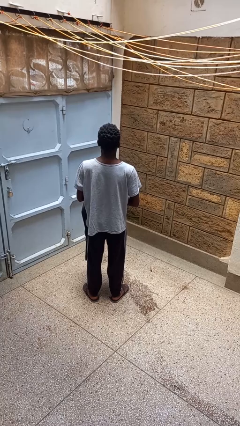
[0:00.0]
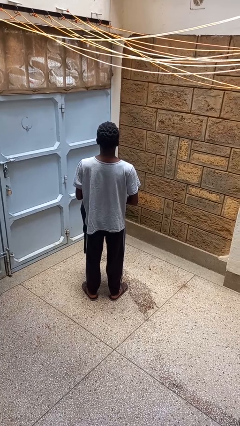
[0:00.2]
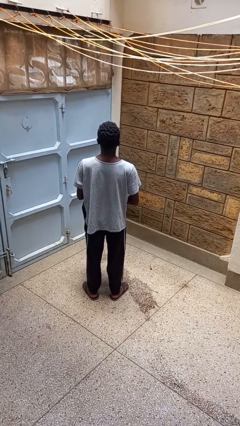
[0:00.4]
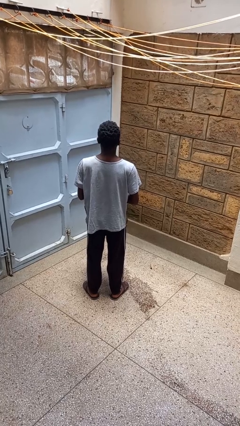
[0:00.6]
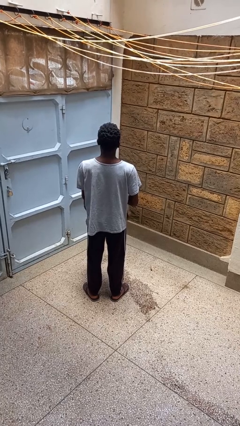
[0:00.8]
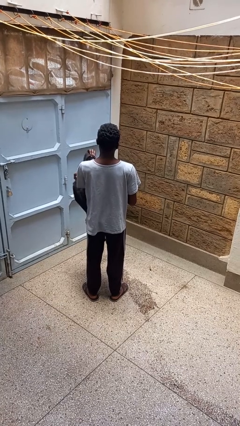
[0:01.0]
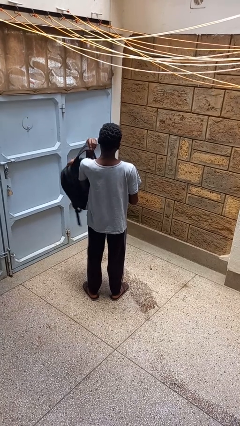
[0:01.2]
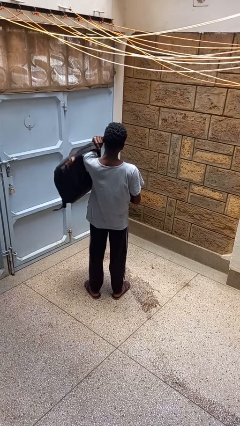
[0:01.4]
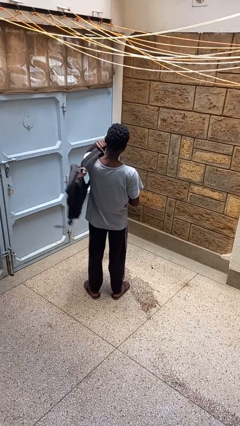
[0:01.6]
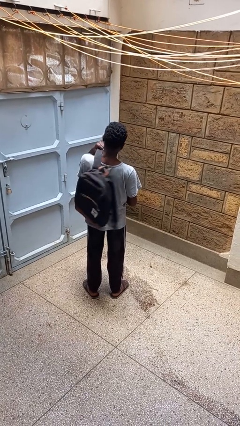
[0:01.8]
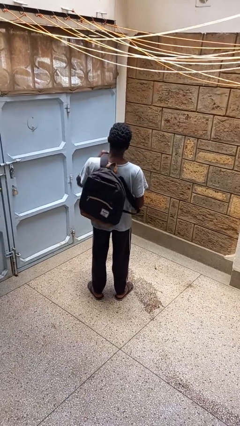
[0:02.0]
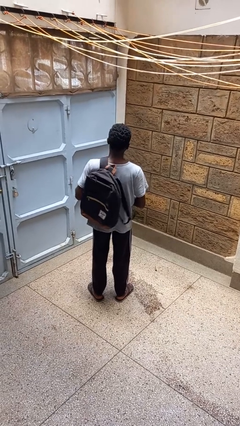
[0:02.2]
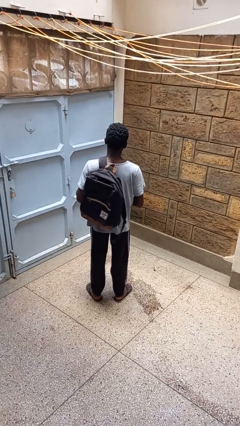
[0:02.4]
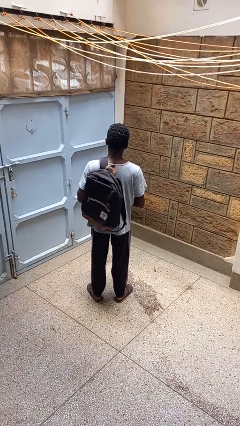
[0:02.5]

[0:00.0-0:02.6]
person puts on backpack

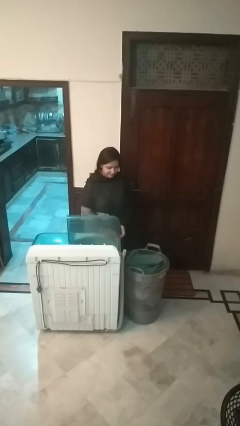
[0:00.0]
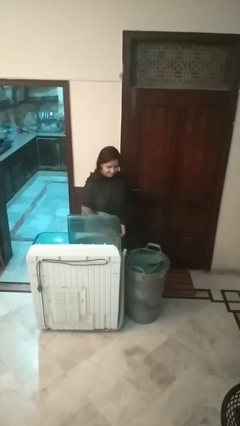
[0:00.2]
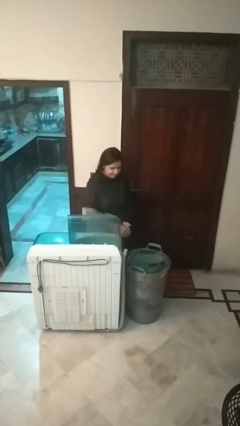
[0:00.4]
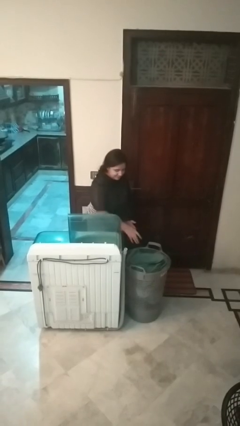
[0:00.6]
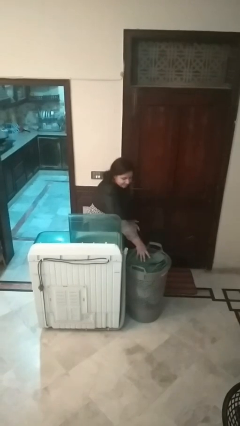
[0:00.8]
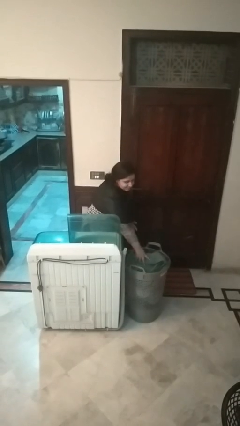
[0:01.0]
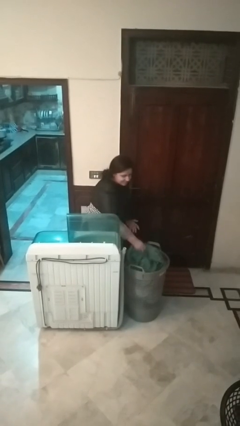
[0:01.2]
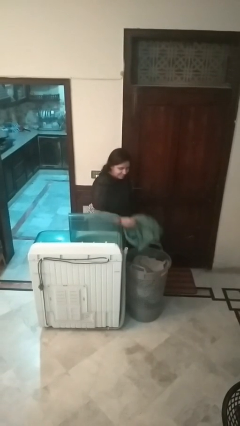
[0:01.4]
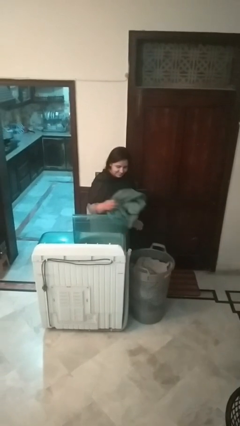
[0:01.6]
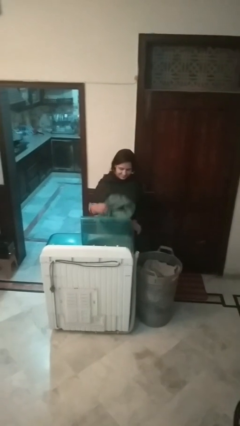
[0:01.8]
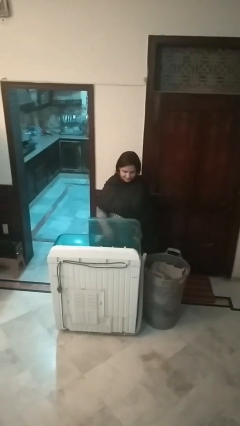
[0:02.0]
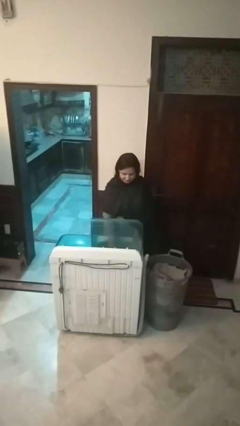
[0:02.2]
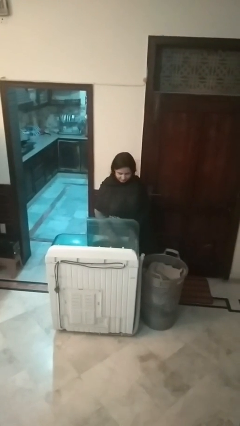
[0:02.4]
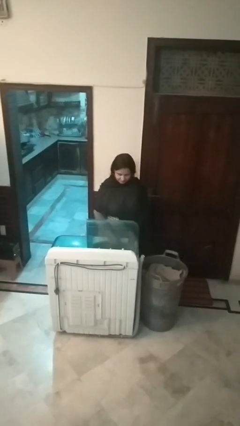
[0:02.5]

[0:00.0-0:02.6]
person loads clotheswasher

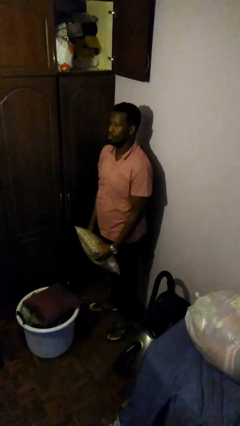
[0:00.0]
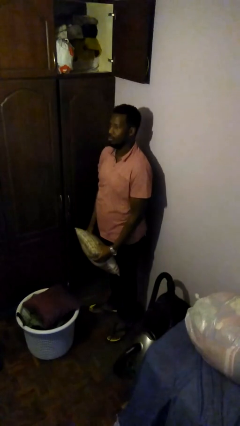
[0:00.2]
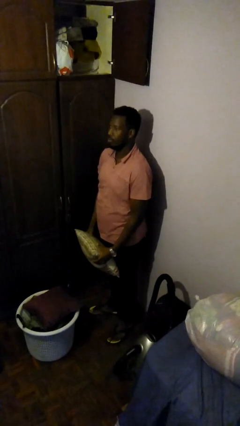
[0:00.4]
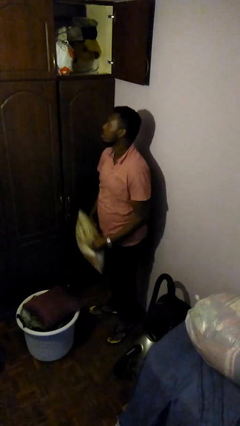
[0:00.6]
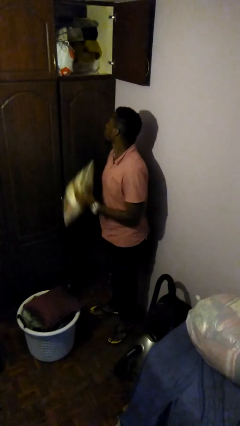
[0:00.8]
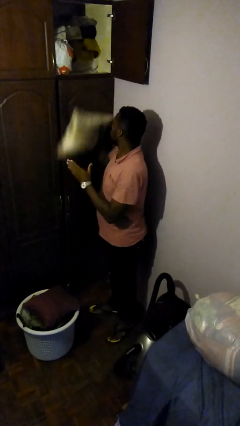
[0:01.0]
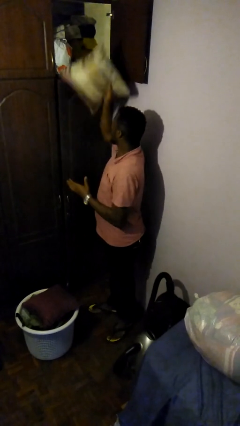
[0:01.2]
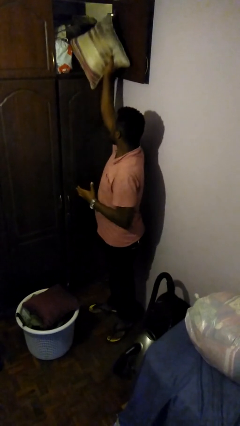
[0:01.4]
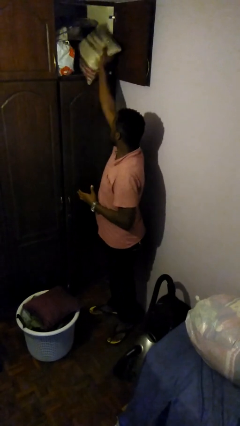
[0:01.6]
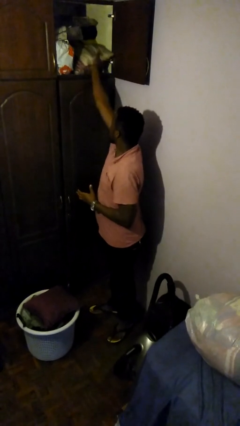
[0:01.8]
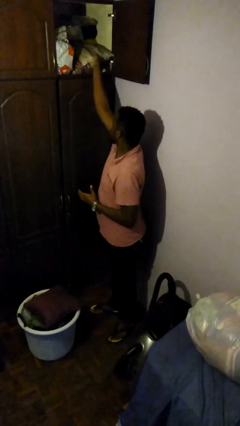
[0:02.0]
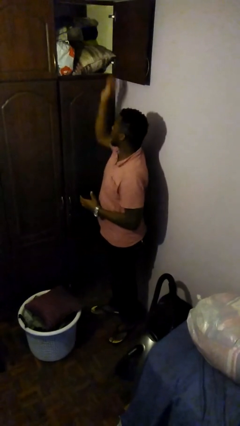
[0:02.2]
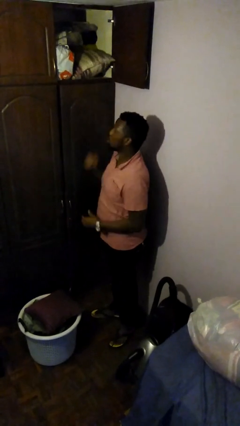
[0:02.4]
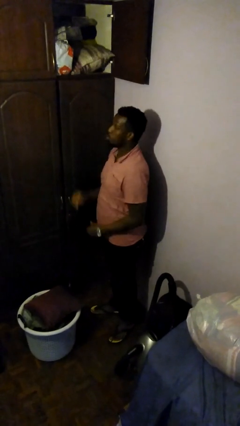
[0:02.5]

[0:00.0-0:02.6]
person puts down object on shelf

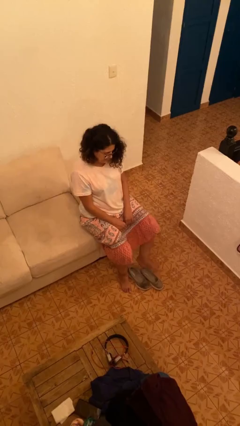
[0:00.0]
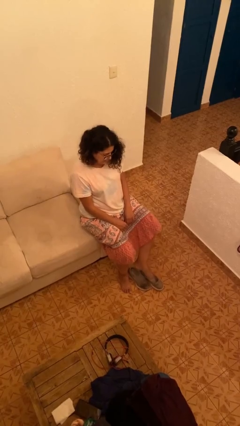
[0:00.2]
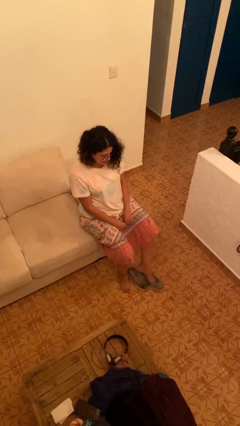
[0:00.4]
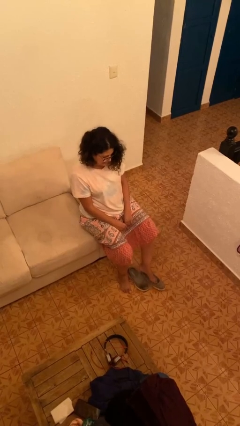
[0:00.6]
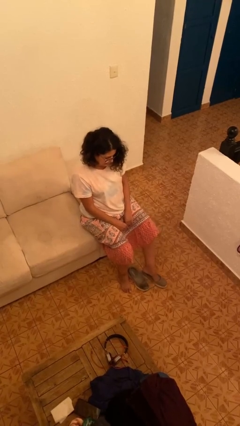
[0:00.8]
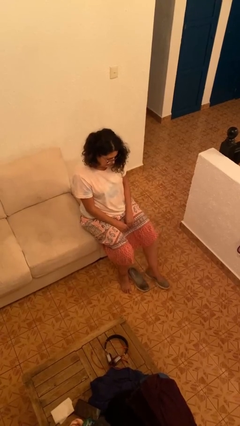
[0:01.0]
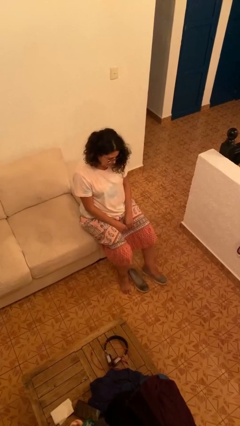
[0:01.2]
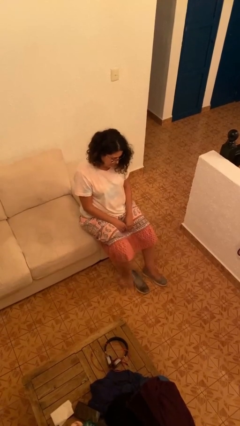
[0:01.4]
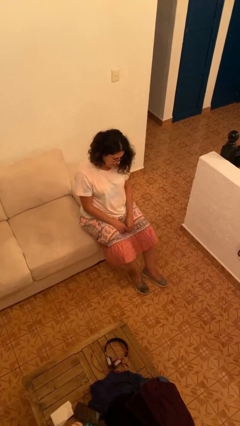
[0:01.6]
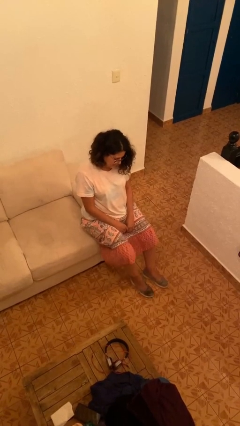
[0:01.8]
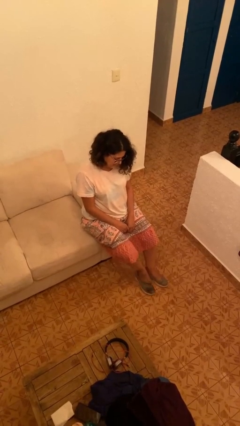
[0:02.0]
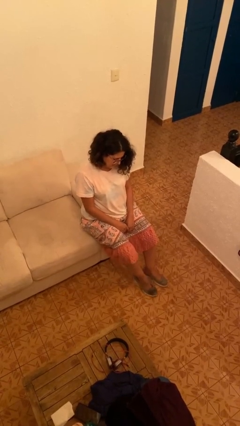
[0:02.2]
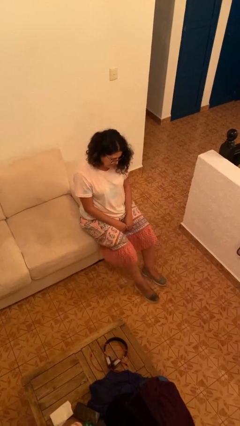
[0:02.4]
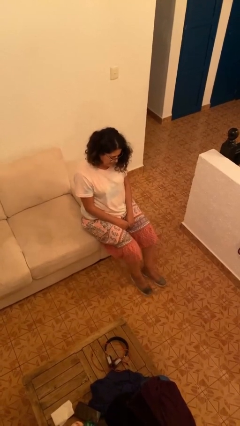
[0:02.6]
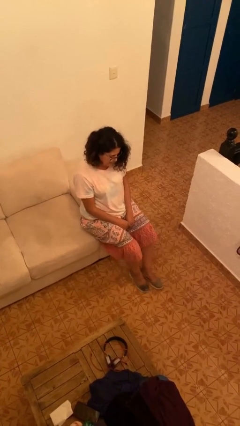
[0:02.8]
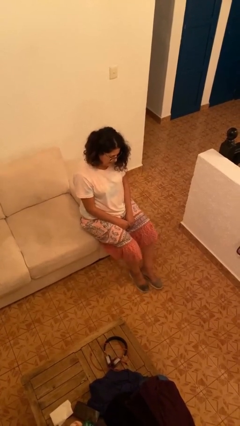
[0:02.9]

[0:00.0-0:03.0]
person puts on shoes

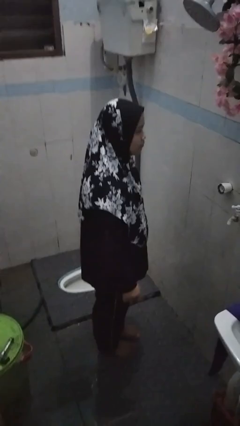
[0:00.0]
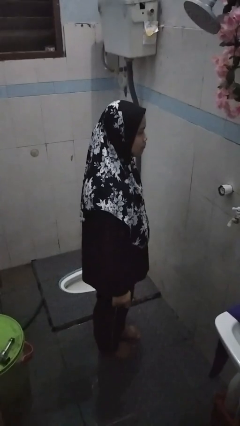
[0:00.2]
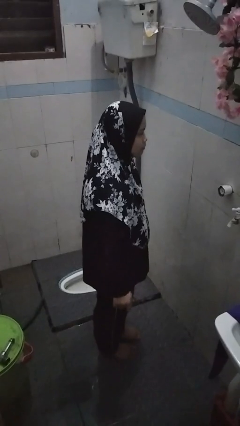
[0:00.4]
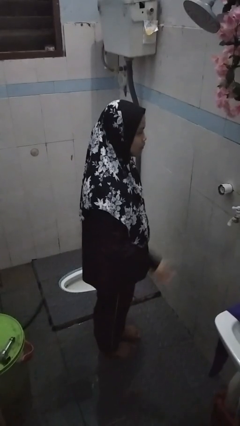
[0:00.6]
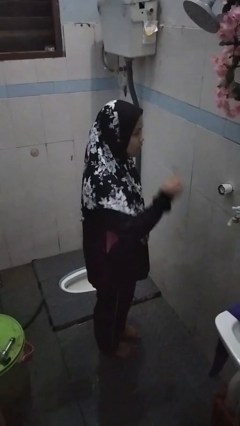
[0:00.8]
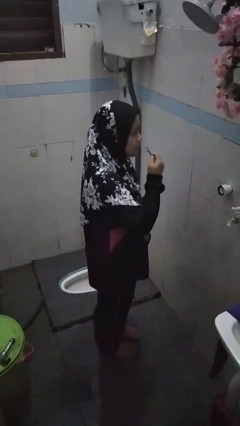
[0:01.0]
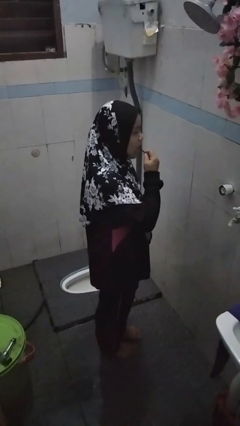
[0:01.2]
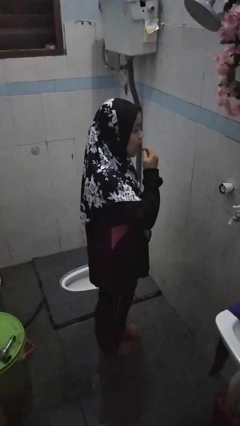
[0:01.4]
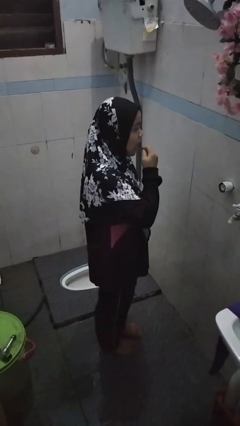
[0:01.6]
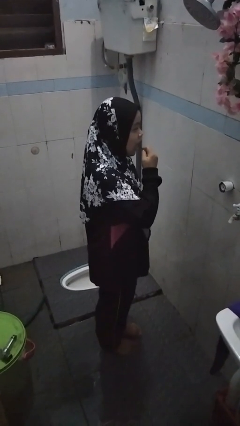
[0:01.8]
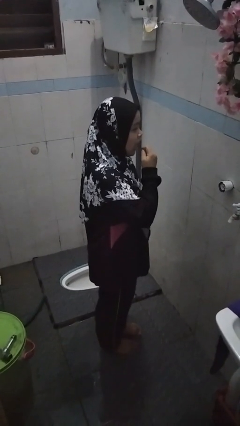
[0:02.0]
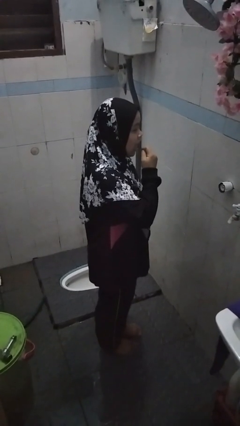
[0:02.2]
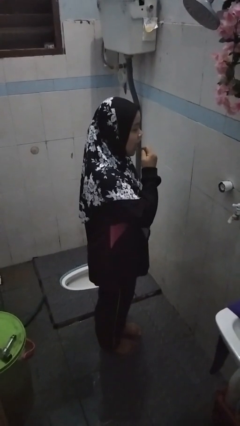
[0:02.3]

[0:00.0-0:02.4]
person flosses

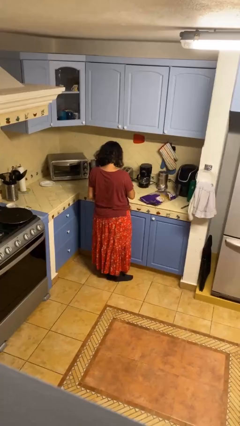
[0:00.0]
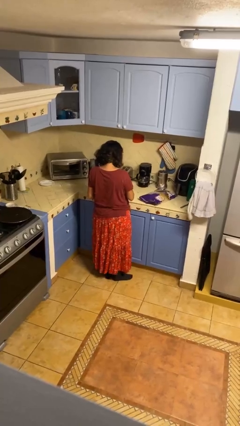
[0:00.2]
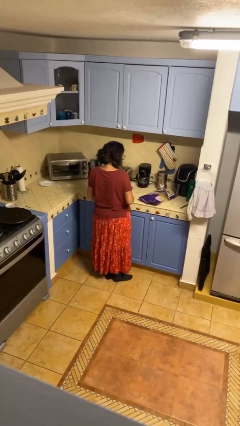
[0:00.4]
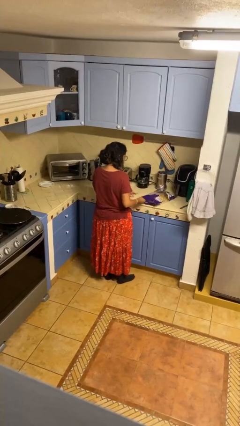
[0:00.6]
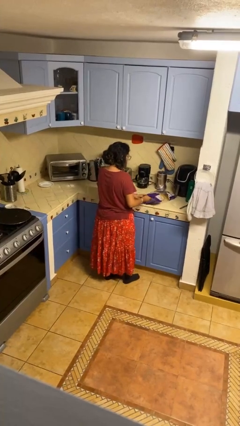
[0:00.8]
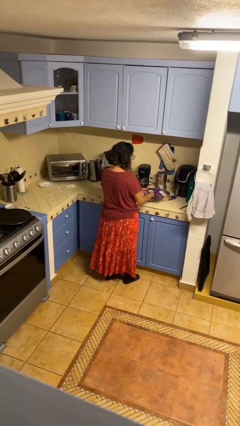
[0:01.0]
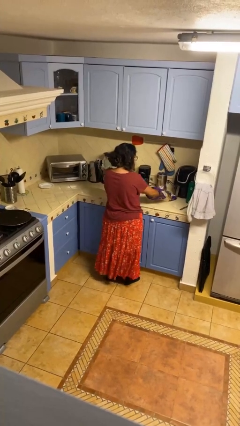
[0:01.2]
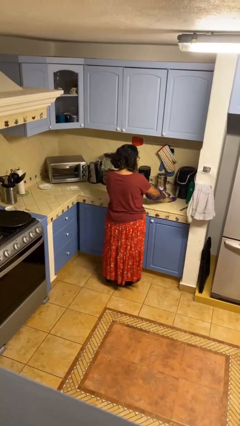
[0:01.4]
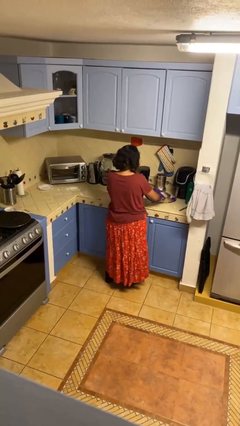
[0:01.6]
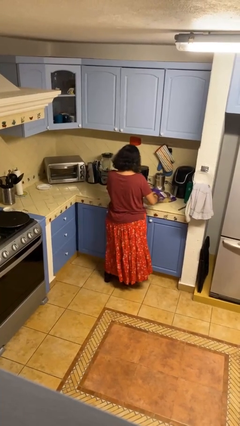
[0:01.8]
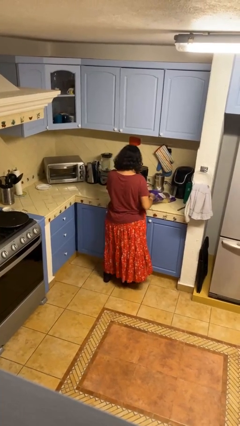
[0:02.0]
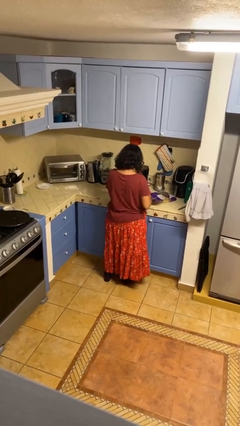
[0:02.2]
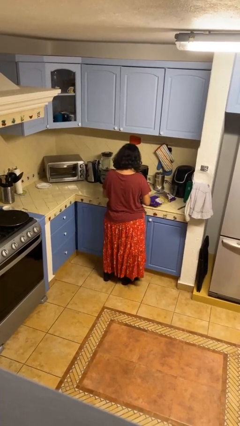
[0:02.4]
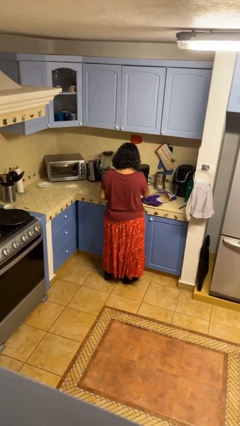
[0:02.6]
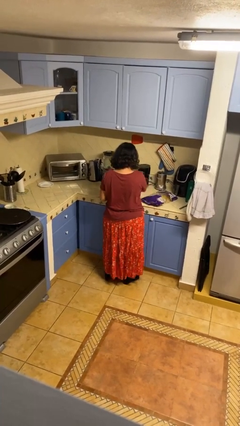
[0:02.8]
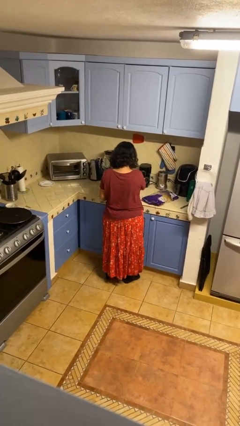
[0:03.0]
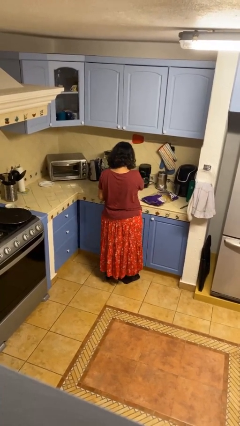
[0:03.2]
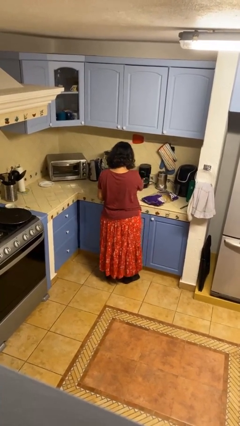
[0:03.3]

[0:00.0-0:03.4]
person eats snack from bag

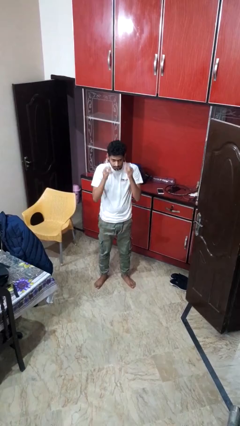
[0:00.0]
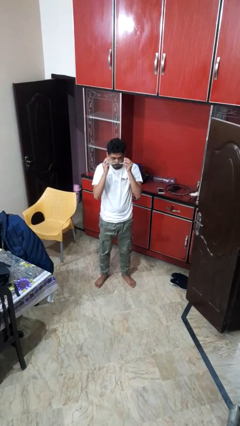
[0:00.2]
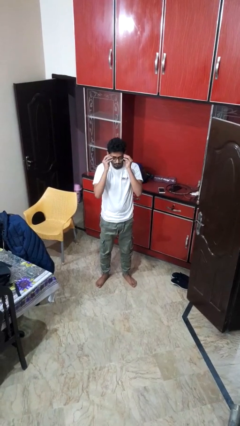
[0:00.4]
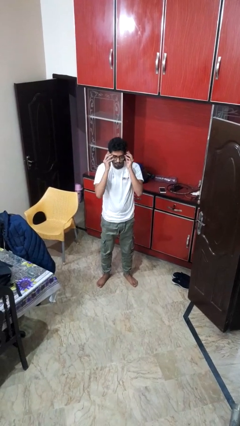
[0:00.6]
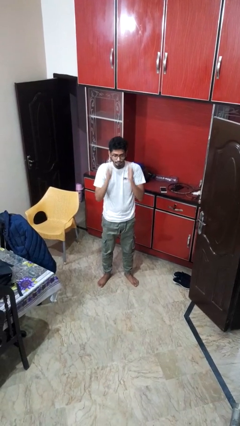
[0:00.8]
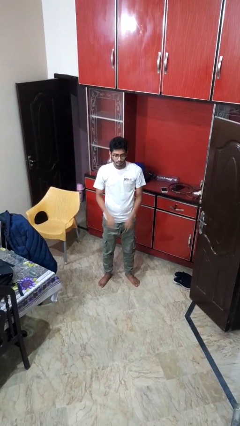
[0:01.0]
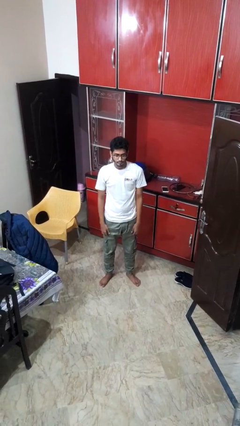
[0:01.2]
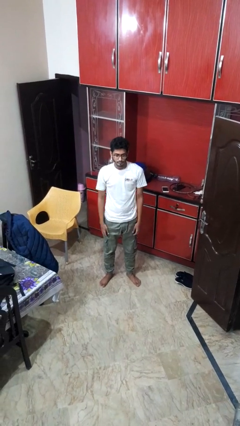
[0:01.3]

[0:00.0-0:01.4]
person puts on glasses
